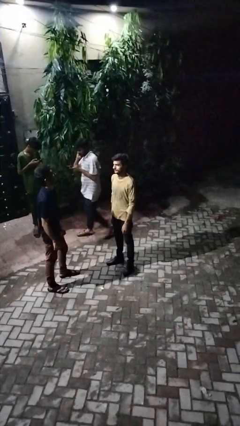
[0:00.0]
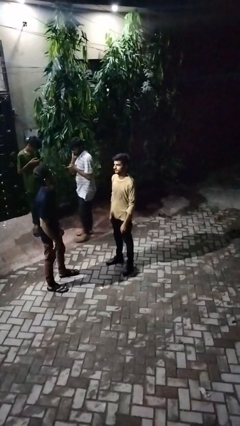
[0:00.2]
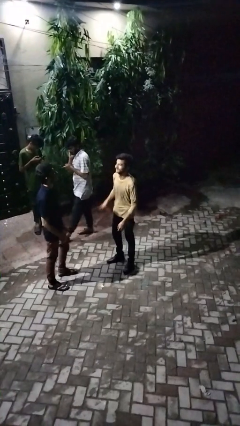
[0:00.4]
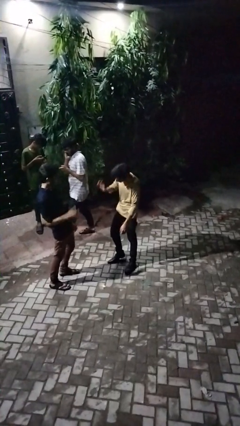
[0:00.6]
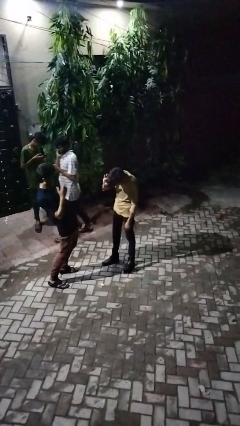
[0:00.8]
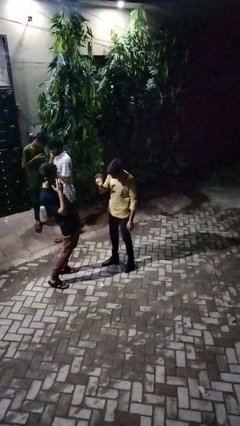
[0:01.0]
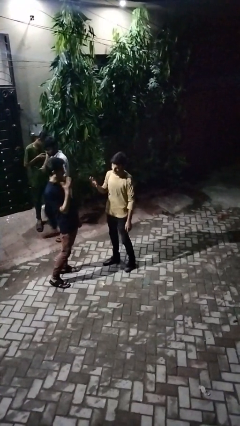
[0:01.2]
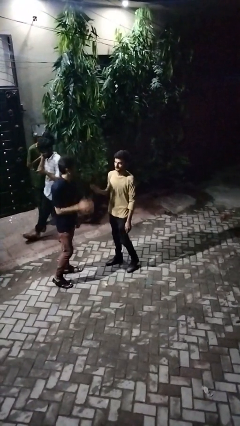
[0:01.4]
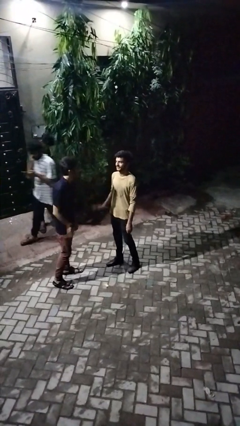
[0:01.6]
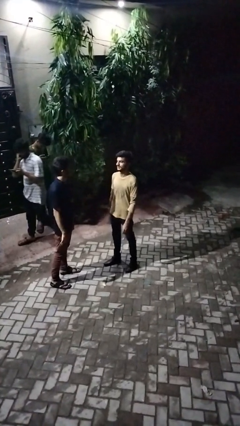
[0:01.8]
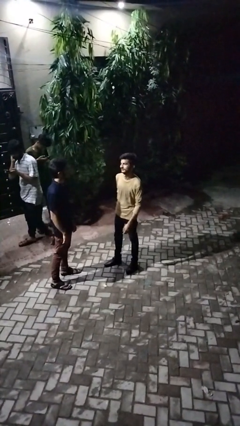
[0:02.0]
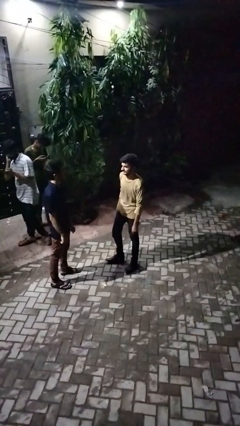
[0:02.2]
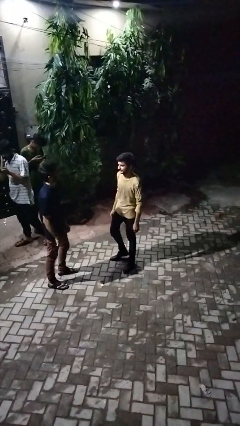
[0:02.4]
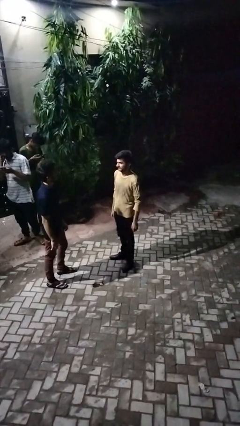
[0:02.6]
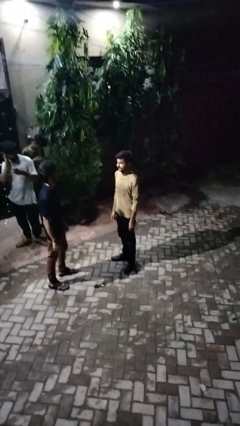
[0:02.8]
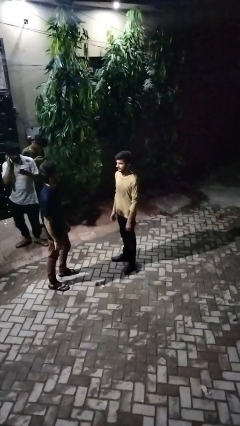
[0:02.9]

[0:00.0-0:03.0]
person laughs with person

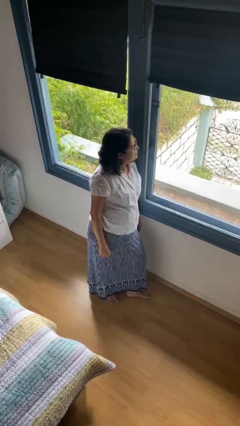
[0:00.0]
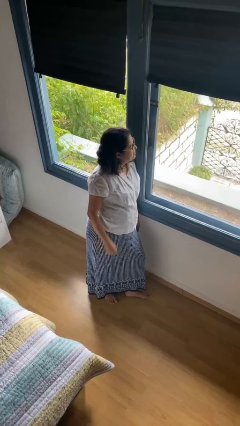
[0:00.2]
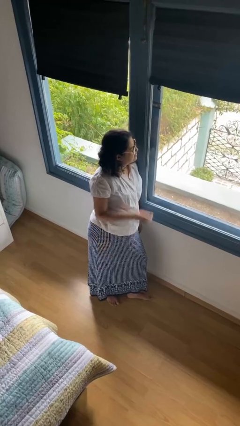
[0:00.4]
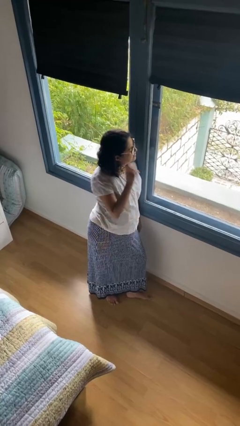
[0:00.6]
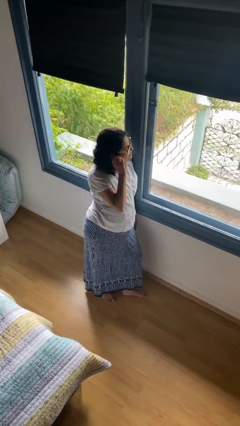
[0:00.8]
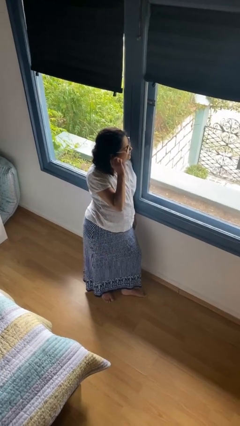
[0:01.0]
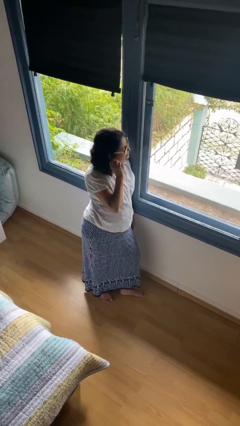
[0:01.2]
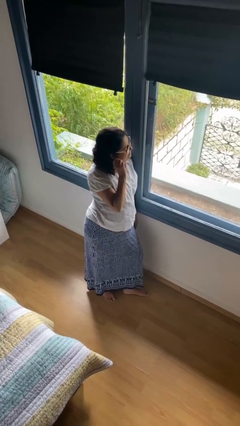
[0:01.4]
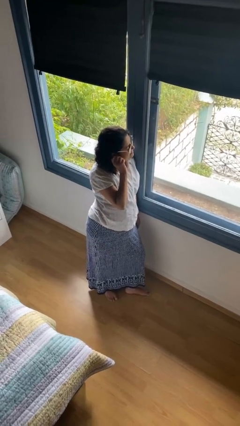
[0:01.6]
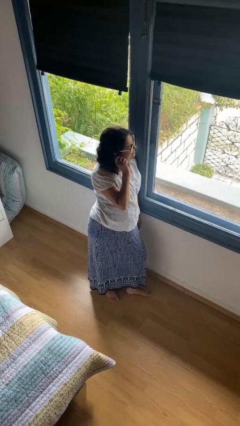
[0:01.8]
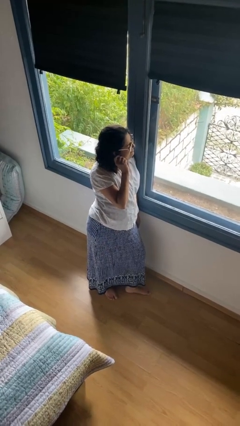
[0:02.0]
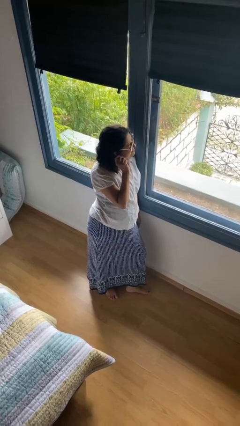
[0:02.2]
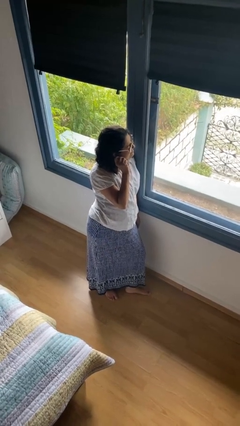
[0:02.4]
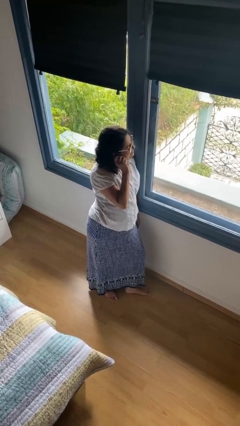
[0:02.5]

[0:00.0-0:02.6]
person touches earlobe

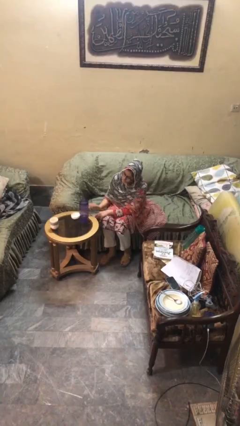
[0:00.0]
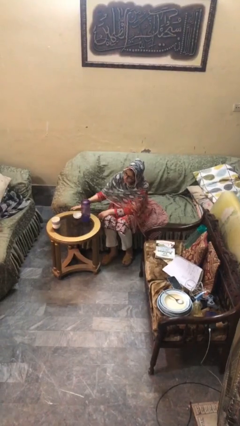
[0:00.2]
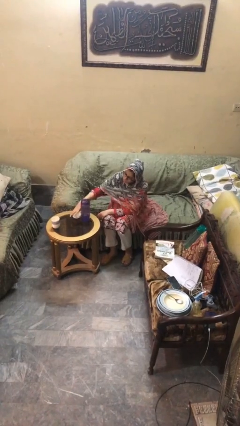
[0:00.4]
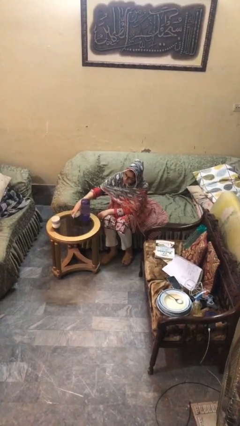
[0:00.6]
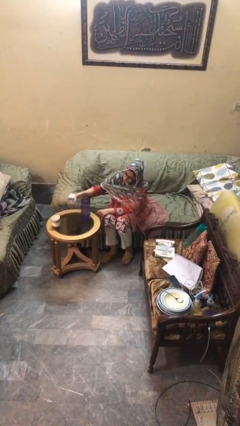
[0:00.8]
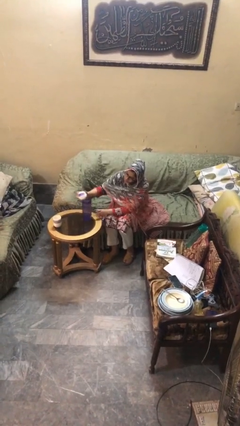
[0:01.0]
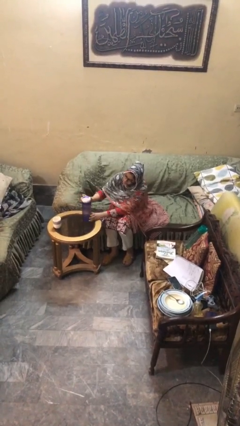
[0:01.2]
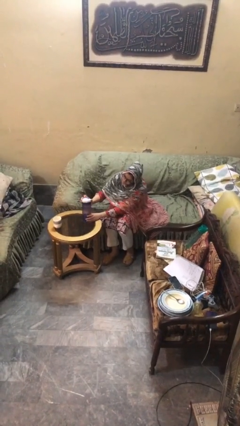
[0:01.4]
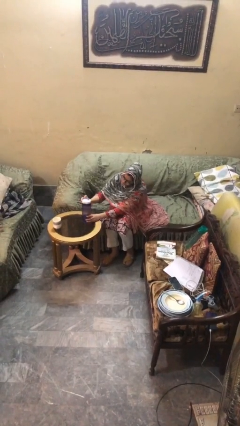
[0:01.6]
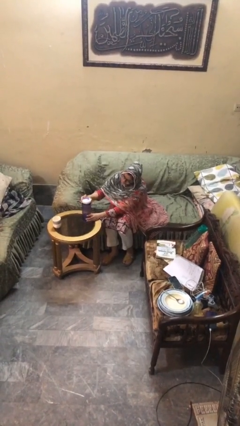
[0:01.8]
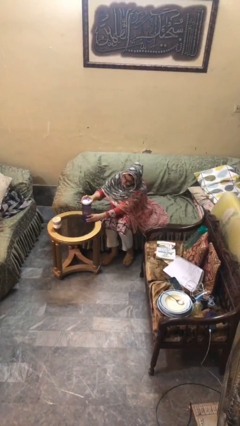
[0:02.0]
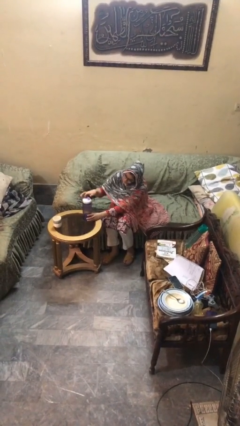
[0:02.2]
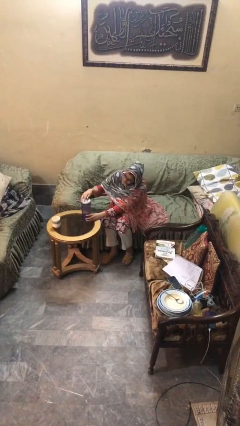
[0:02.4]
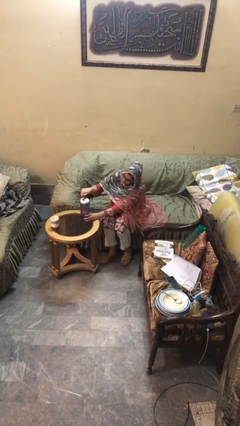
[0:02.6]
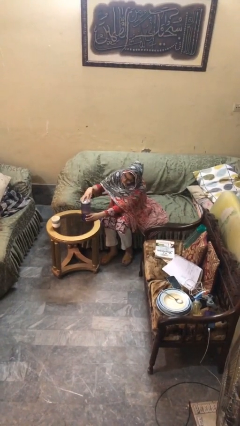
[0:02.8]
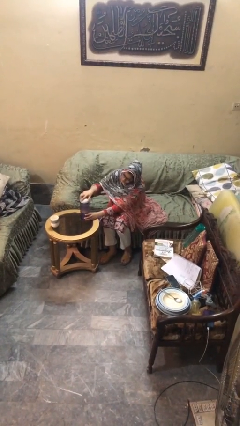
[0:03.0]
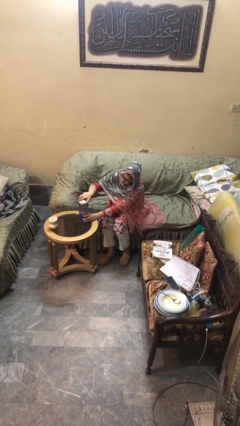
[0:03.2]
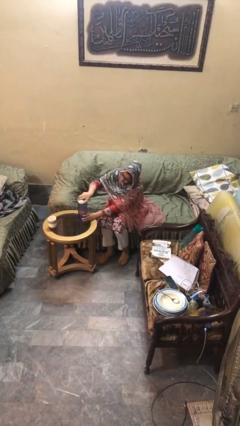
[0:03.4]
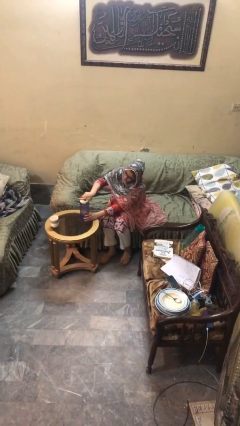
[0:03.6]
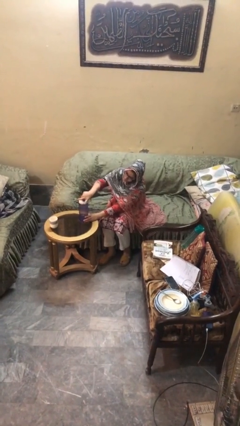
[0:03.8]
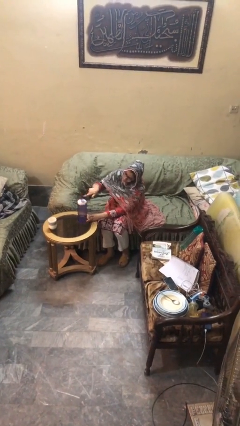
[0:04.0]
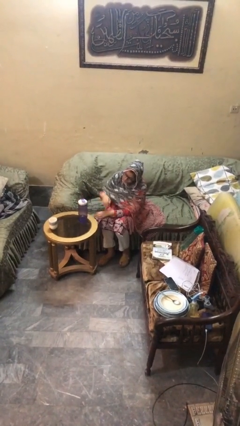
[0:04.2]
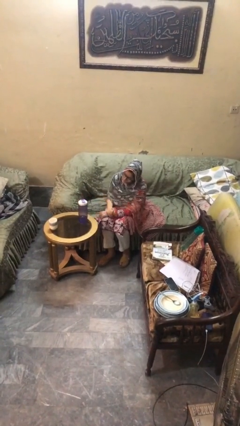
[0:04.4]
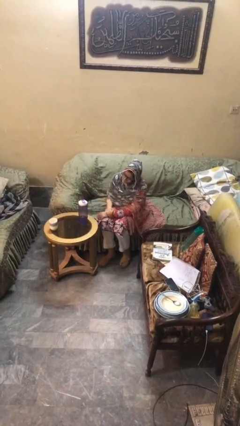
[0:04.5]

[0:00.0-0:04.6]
person screws lid to bottle

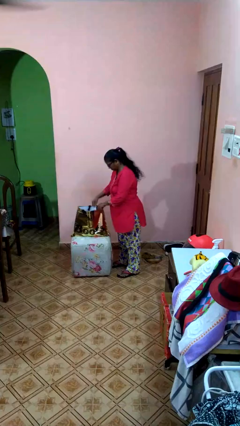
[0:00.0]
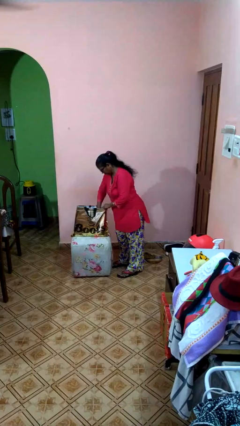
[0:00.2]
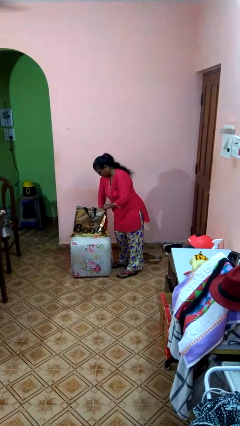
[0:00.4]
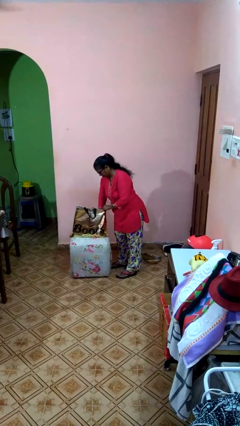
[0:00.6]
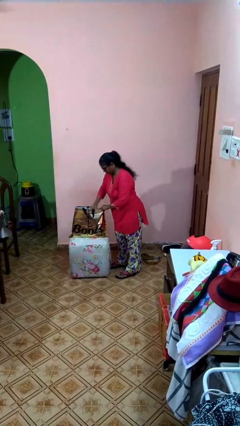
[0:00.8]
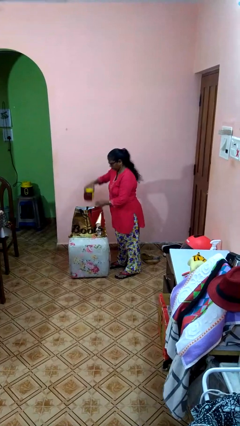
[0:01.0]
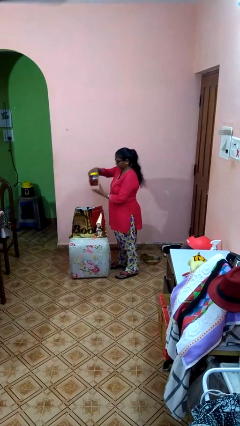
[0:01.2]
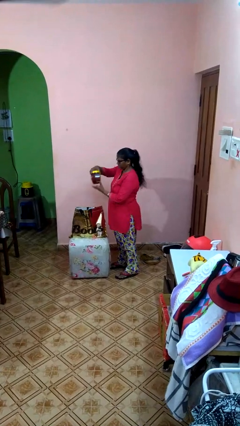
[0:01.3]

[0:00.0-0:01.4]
person takes object from bag

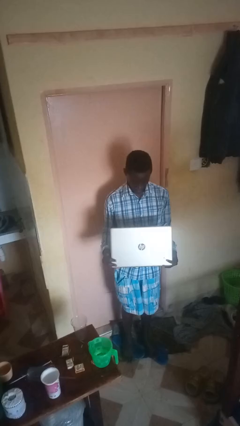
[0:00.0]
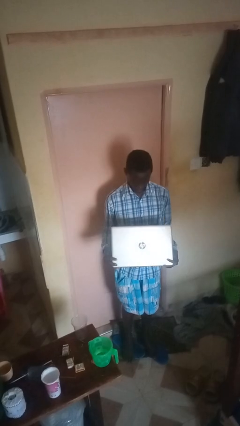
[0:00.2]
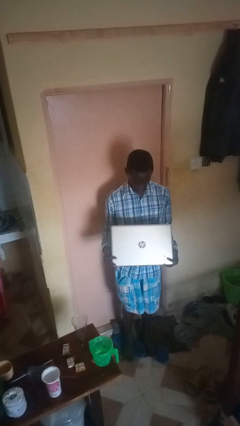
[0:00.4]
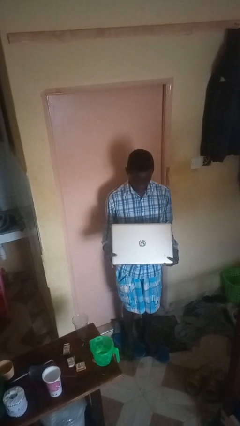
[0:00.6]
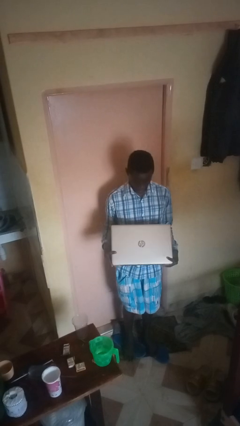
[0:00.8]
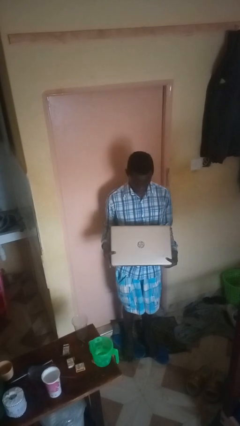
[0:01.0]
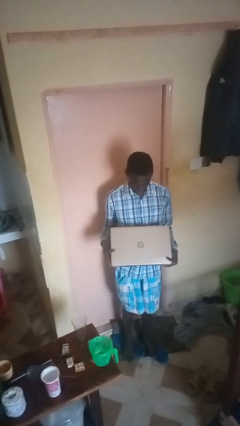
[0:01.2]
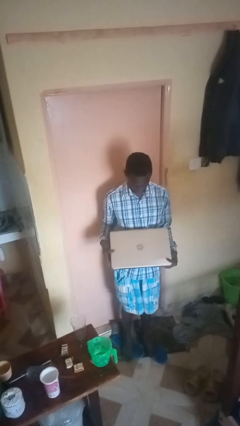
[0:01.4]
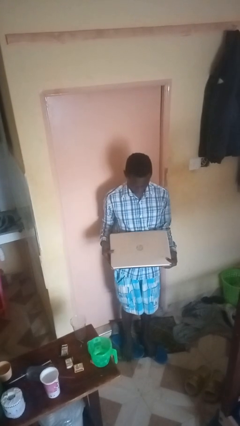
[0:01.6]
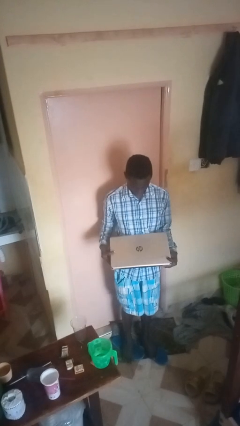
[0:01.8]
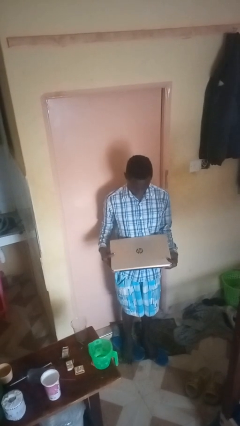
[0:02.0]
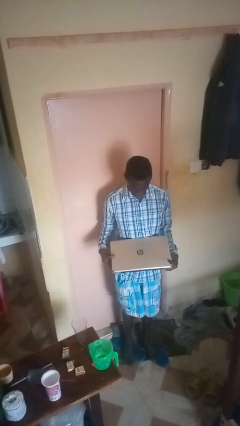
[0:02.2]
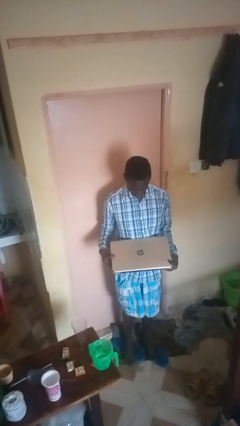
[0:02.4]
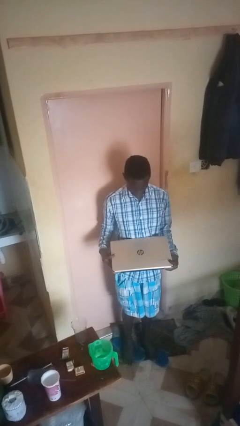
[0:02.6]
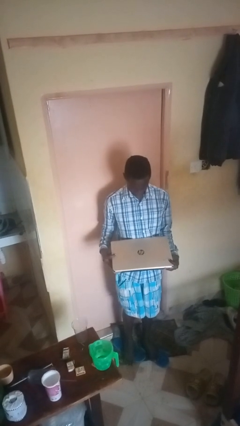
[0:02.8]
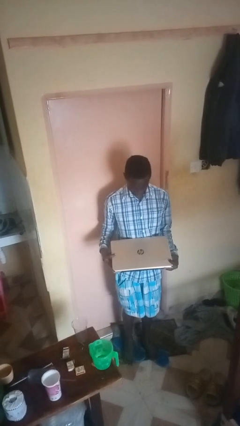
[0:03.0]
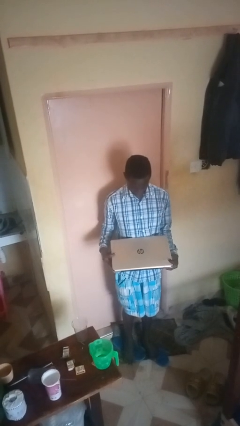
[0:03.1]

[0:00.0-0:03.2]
person closes laptop

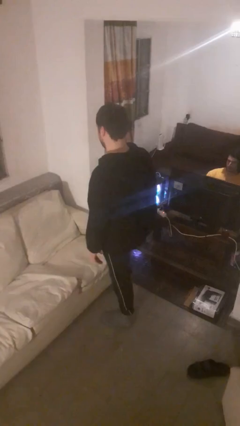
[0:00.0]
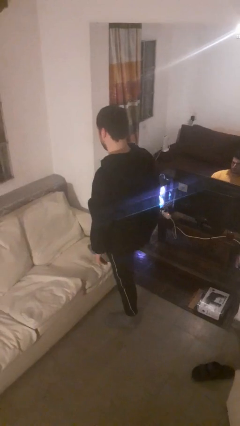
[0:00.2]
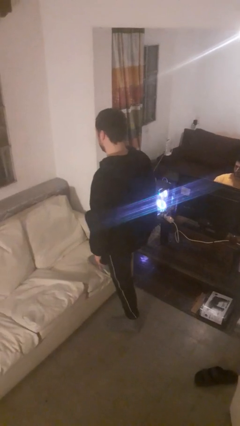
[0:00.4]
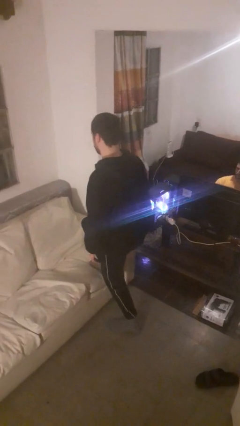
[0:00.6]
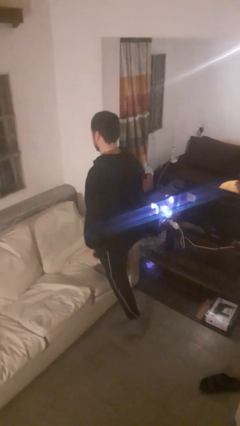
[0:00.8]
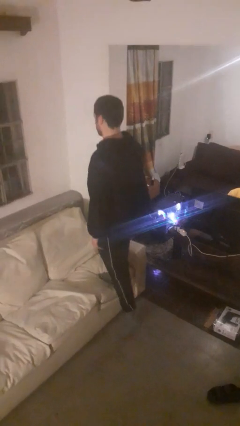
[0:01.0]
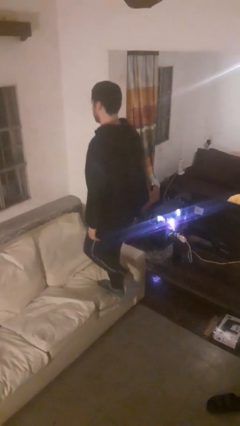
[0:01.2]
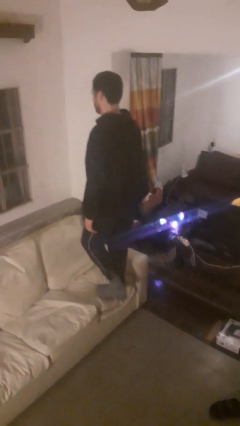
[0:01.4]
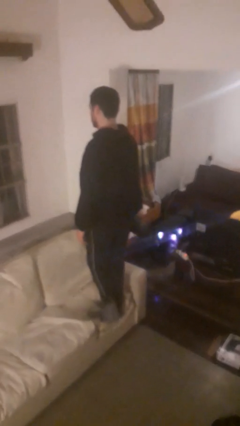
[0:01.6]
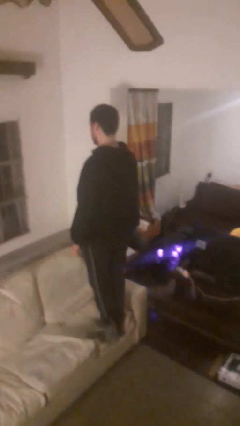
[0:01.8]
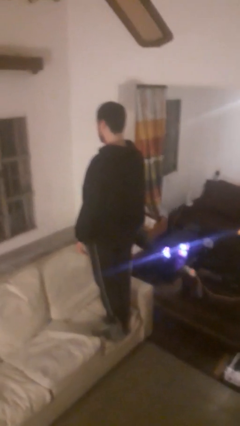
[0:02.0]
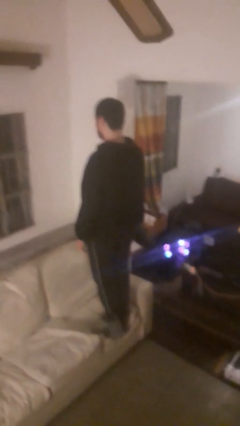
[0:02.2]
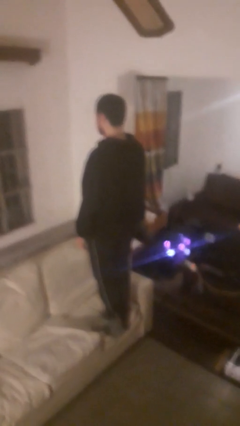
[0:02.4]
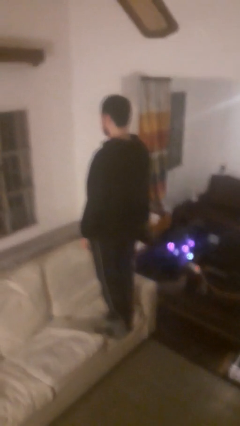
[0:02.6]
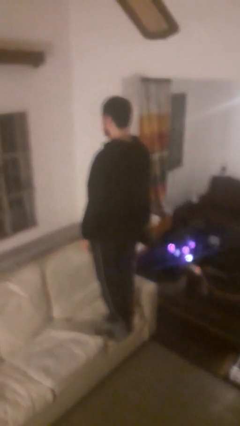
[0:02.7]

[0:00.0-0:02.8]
person climbs on couch
